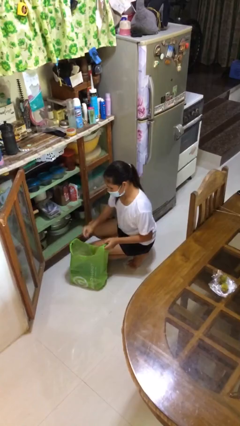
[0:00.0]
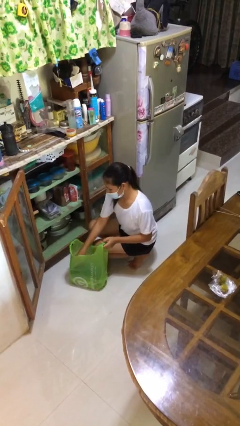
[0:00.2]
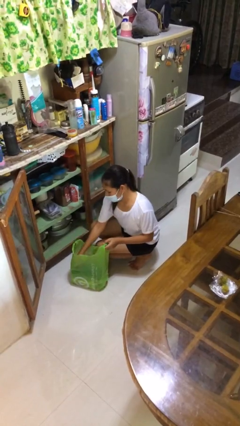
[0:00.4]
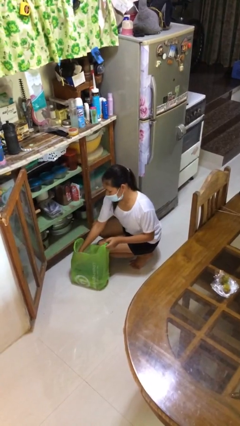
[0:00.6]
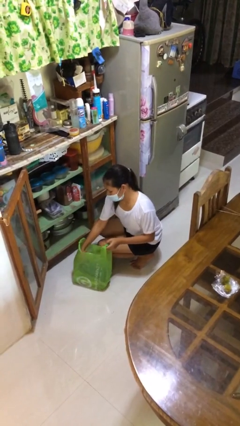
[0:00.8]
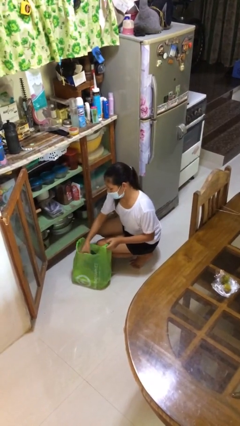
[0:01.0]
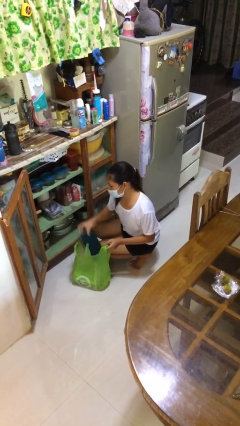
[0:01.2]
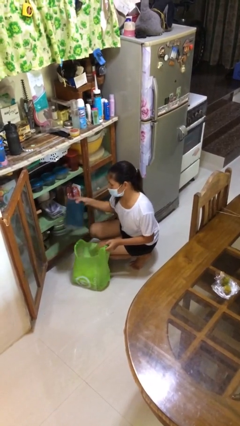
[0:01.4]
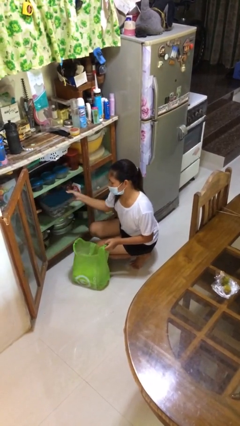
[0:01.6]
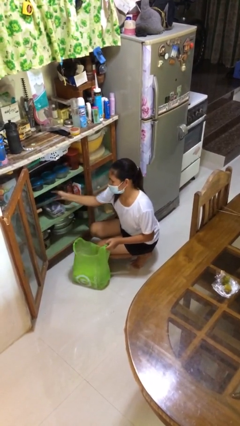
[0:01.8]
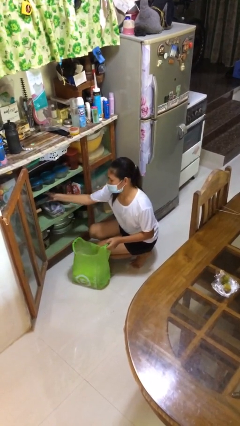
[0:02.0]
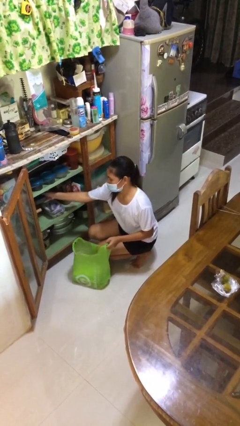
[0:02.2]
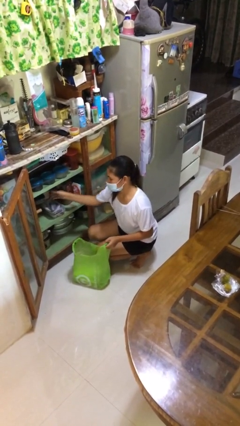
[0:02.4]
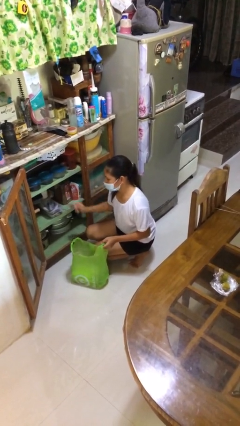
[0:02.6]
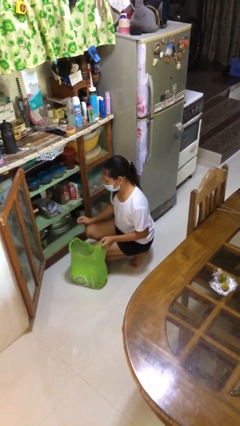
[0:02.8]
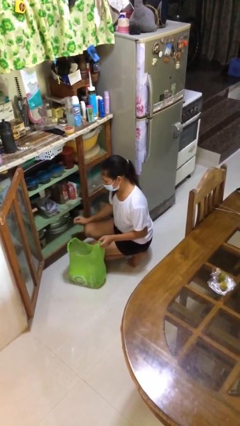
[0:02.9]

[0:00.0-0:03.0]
person loads groceries into cabinet

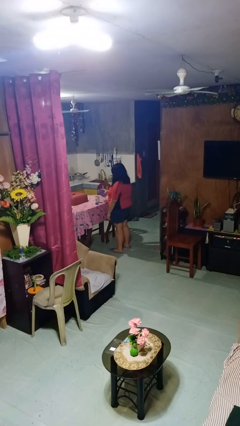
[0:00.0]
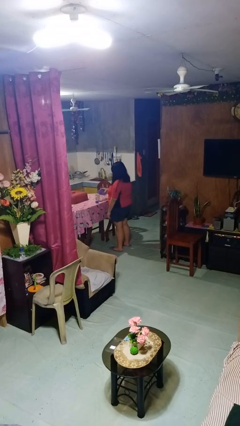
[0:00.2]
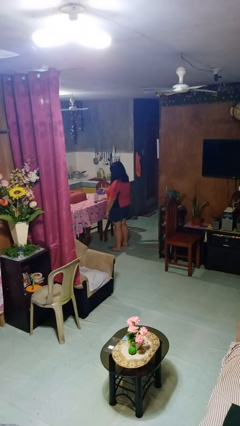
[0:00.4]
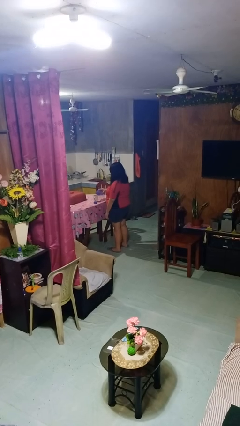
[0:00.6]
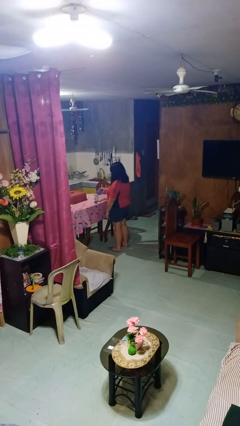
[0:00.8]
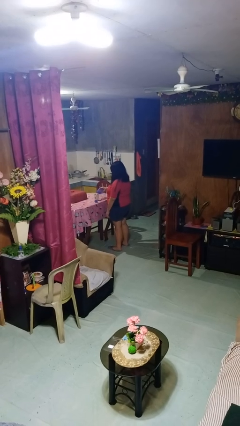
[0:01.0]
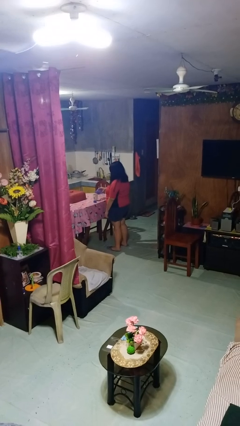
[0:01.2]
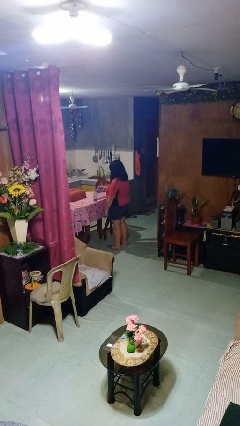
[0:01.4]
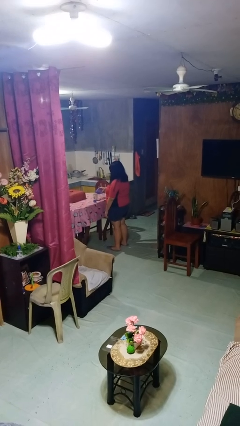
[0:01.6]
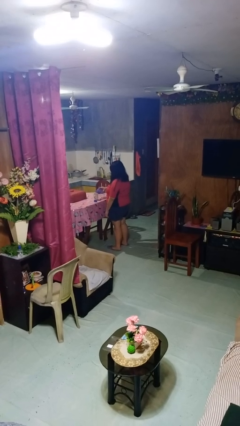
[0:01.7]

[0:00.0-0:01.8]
person pours liquid into cup

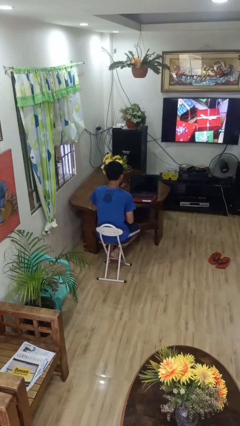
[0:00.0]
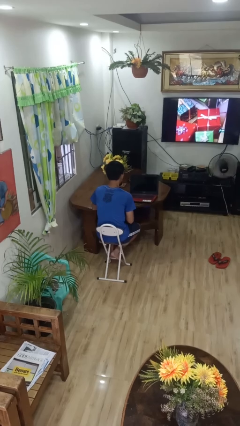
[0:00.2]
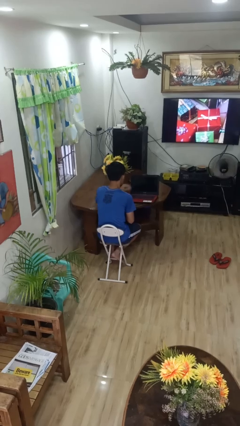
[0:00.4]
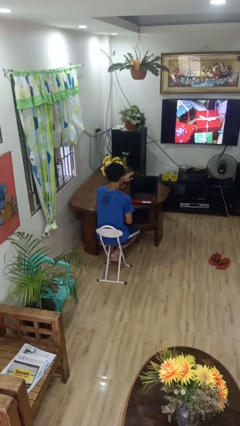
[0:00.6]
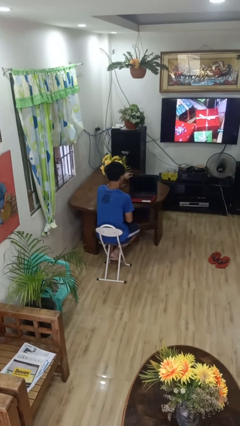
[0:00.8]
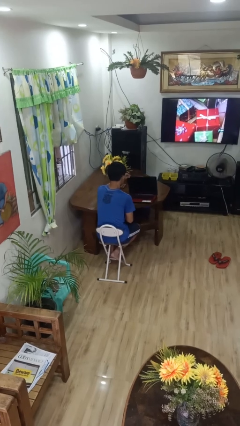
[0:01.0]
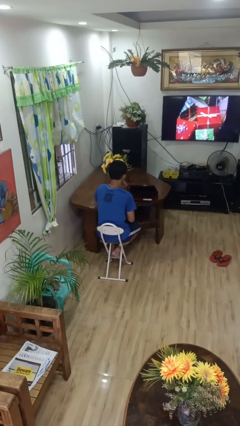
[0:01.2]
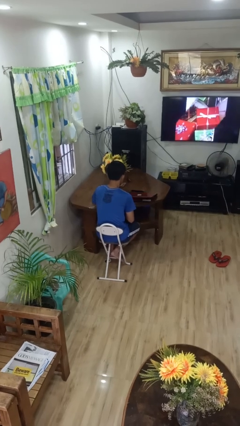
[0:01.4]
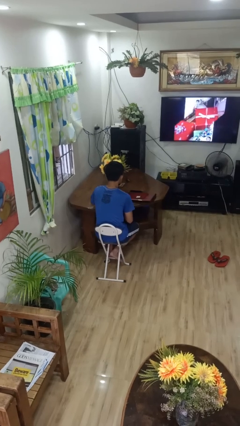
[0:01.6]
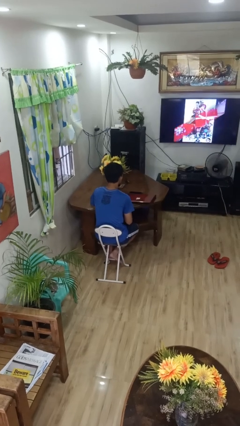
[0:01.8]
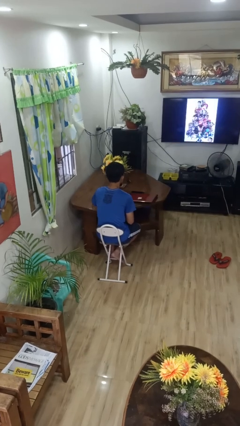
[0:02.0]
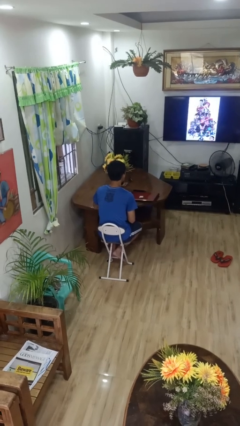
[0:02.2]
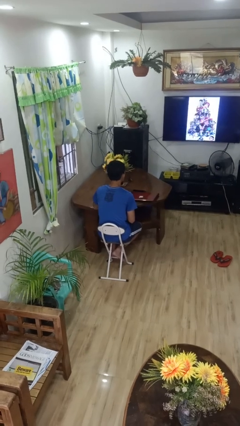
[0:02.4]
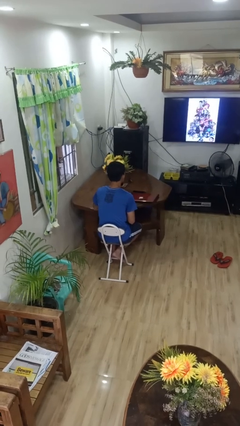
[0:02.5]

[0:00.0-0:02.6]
person closes laptop

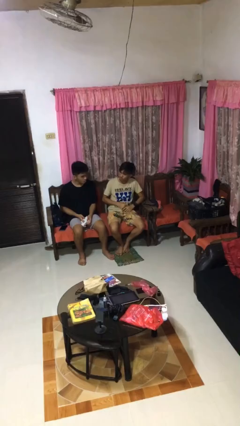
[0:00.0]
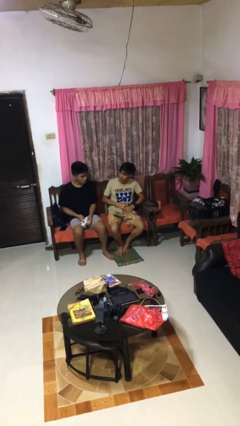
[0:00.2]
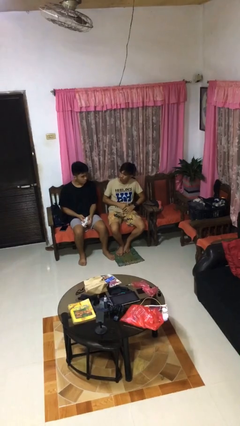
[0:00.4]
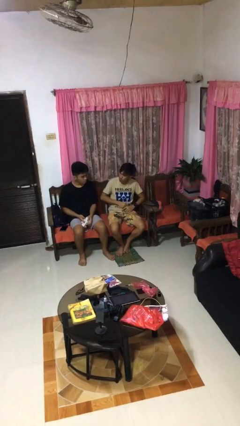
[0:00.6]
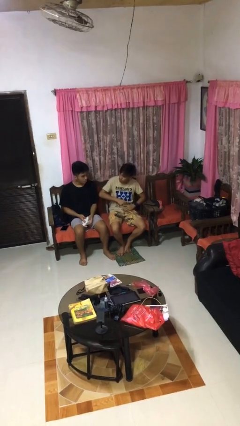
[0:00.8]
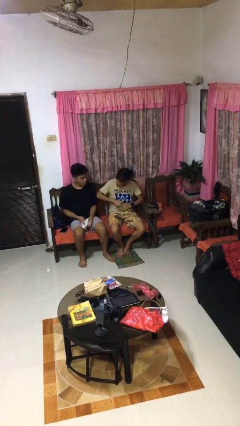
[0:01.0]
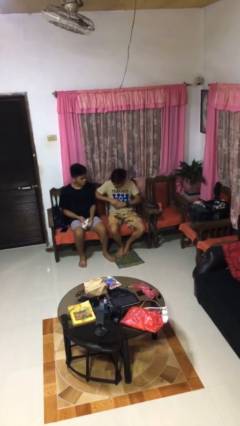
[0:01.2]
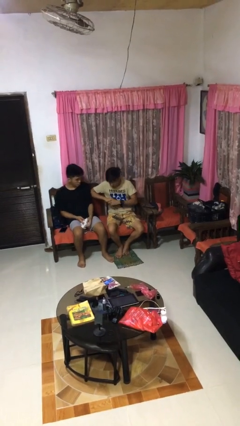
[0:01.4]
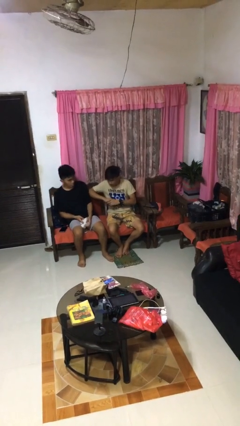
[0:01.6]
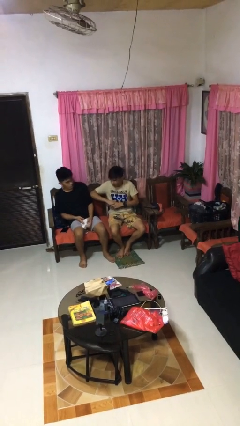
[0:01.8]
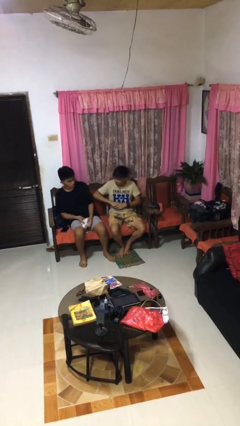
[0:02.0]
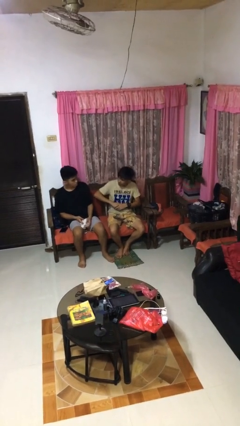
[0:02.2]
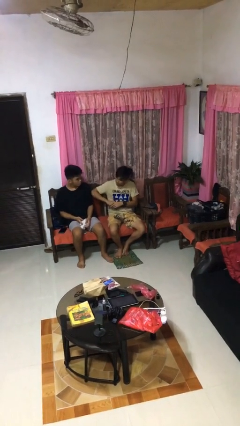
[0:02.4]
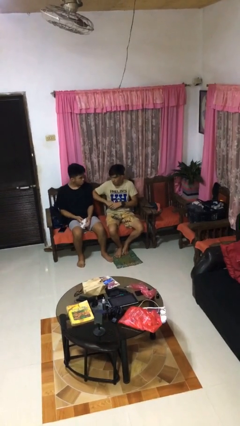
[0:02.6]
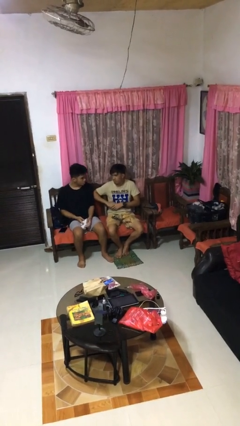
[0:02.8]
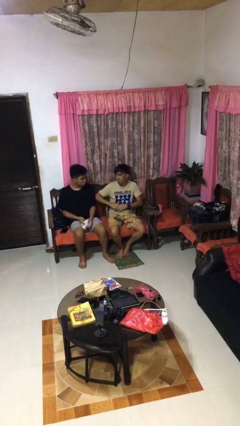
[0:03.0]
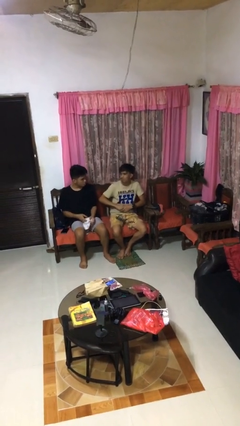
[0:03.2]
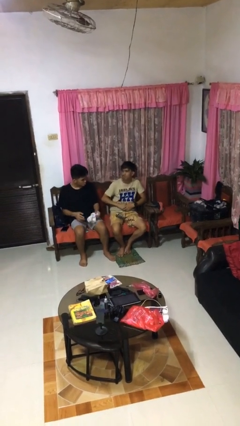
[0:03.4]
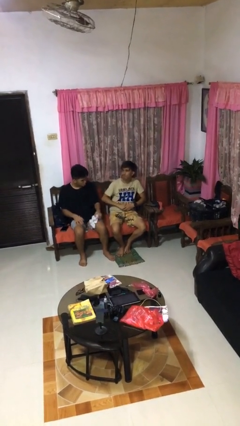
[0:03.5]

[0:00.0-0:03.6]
person nudges person with elbow

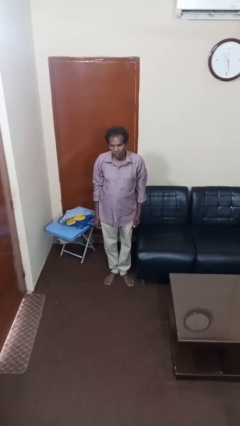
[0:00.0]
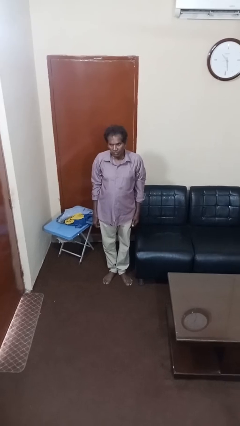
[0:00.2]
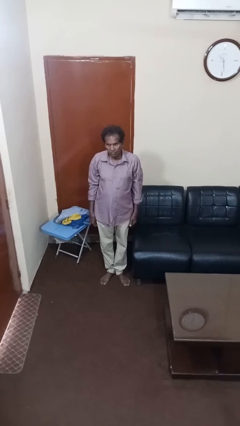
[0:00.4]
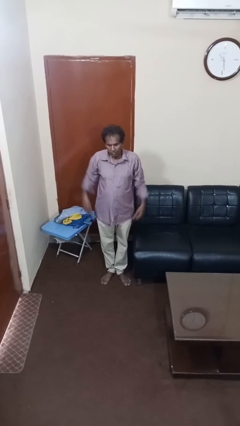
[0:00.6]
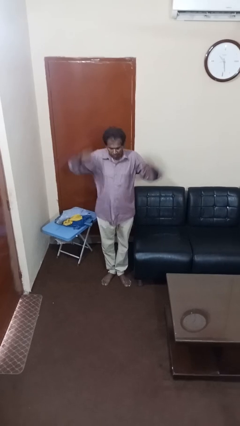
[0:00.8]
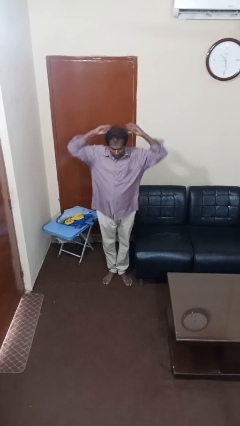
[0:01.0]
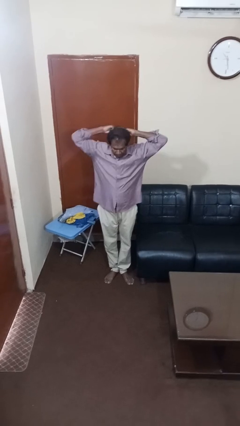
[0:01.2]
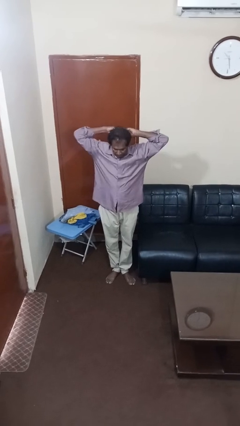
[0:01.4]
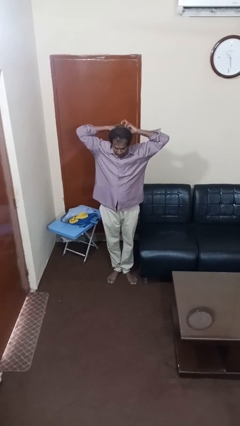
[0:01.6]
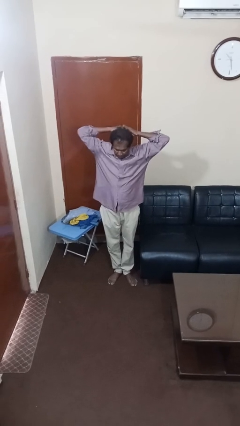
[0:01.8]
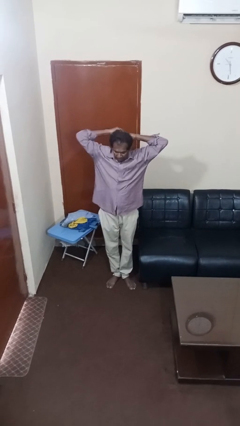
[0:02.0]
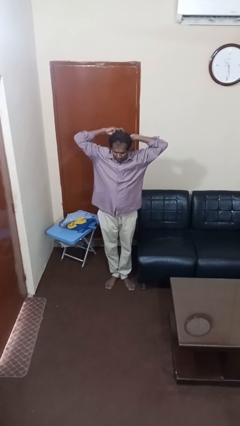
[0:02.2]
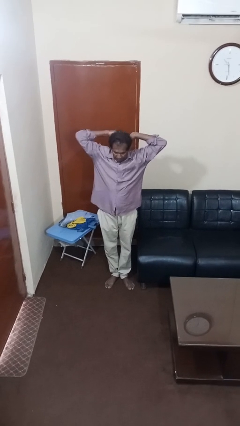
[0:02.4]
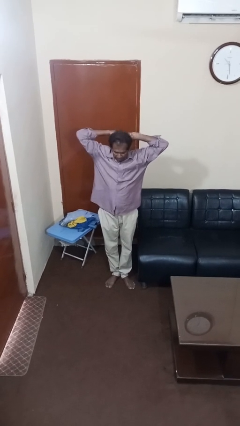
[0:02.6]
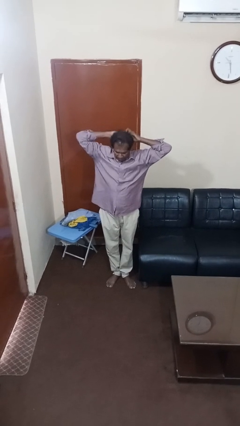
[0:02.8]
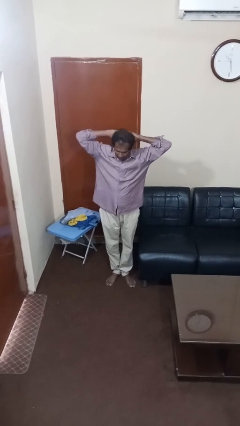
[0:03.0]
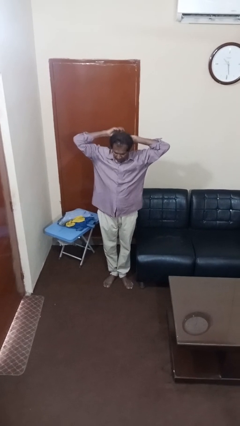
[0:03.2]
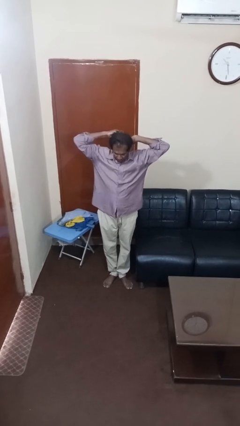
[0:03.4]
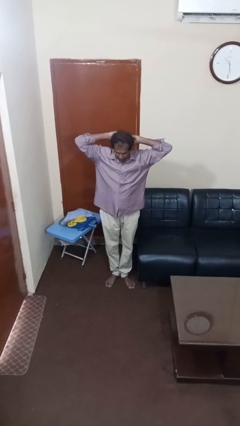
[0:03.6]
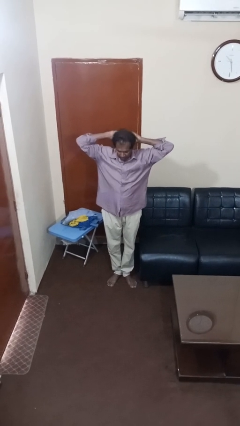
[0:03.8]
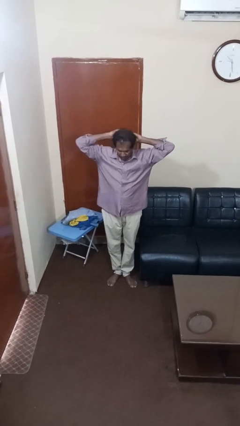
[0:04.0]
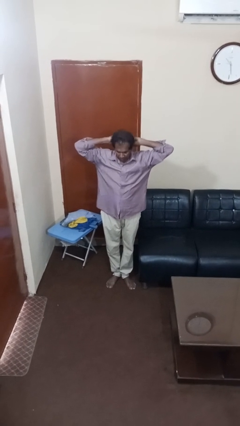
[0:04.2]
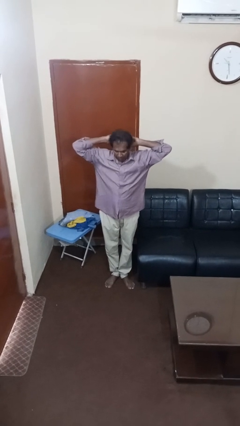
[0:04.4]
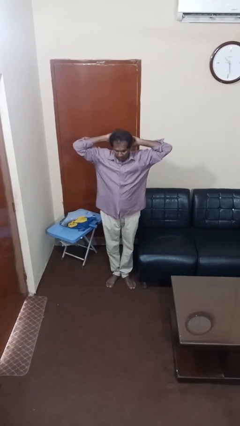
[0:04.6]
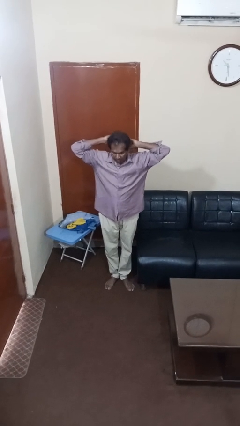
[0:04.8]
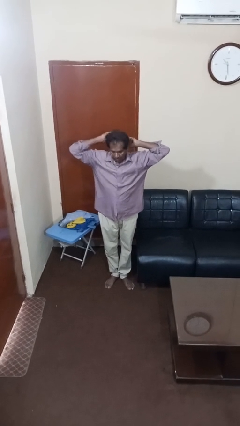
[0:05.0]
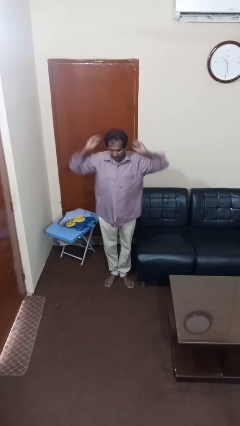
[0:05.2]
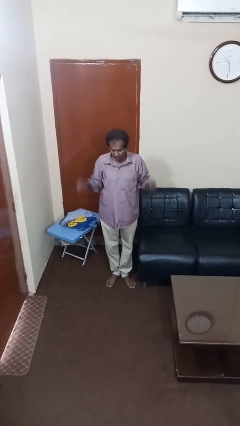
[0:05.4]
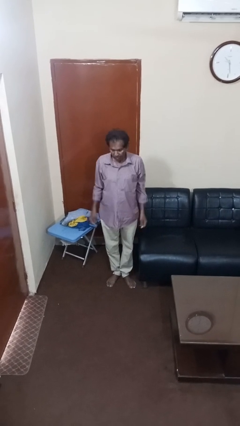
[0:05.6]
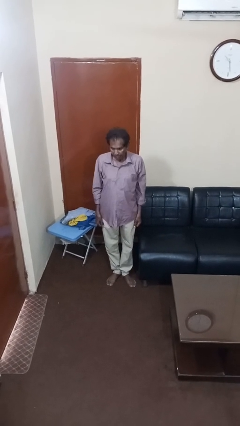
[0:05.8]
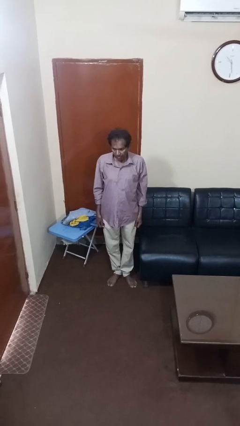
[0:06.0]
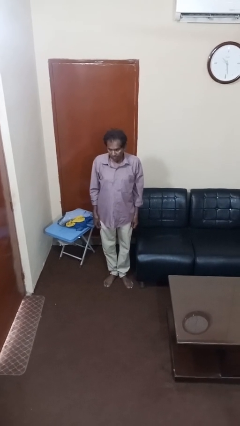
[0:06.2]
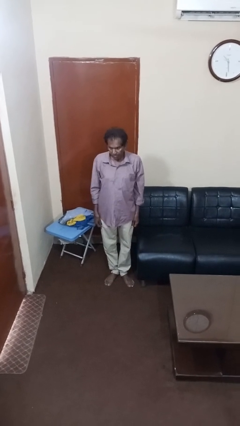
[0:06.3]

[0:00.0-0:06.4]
person puts hair in ponytail
